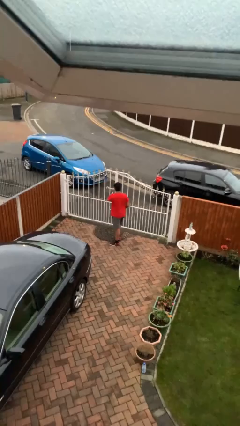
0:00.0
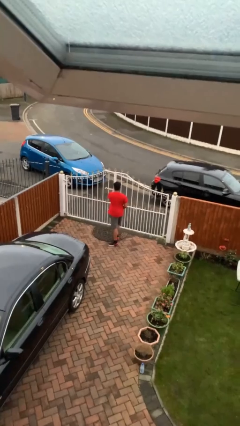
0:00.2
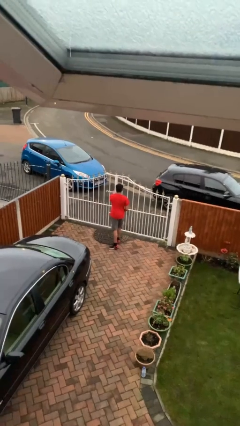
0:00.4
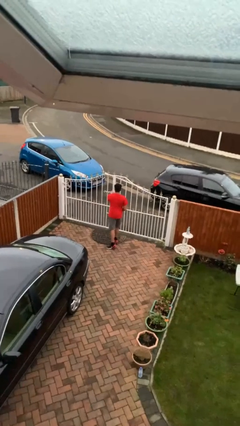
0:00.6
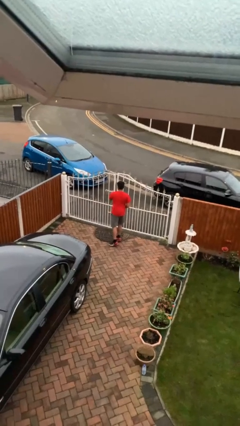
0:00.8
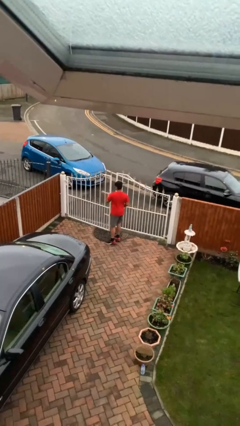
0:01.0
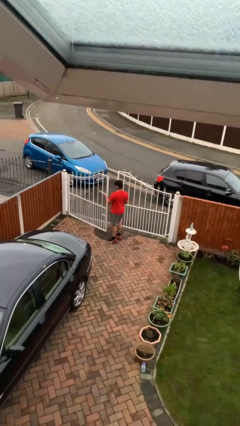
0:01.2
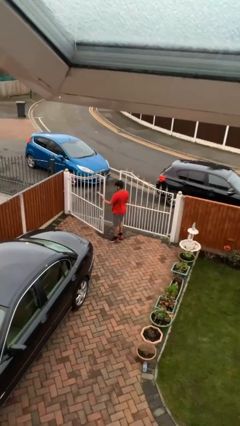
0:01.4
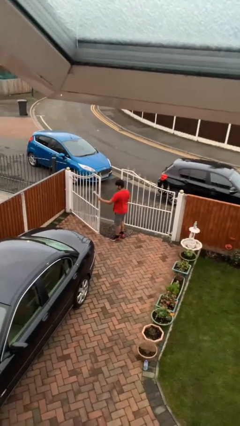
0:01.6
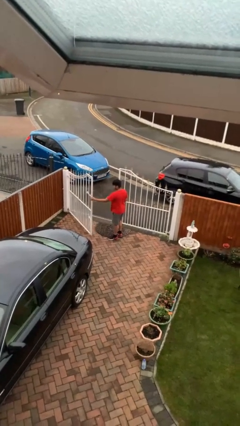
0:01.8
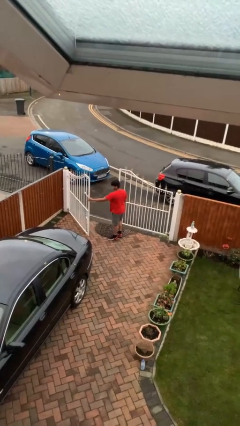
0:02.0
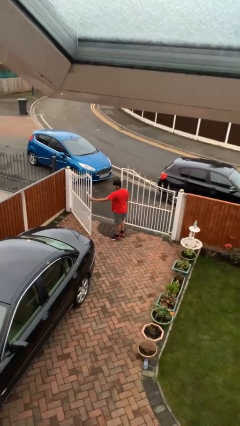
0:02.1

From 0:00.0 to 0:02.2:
person opens facility door

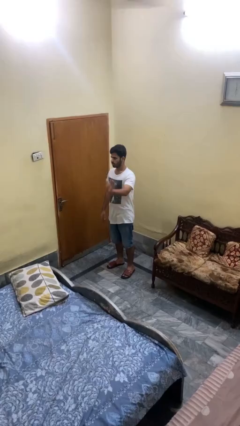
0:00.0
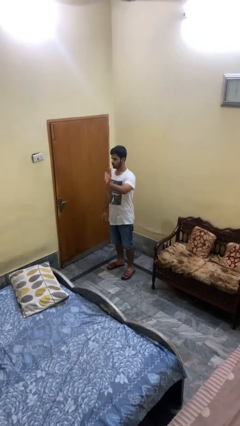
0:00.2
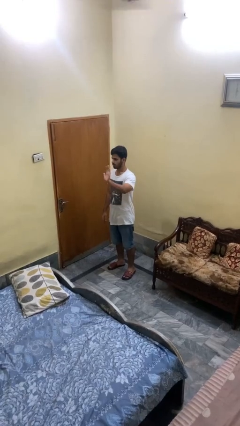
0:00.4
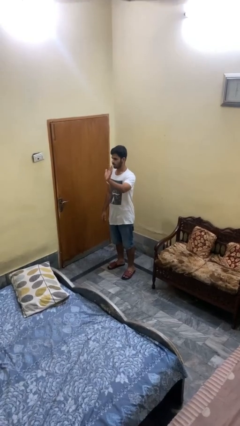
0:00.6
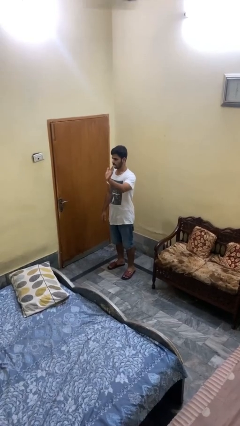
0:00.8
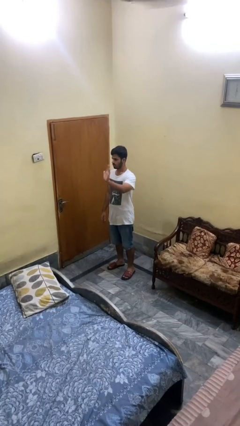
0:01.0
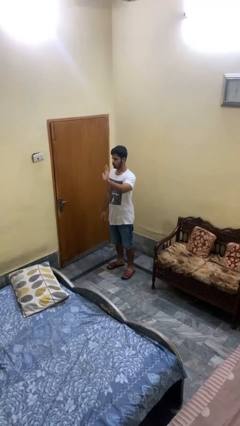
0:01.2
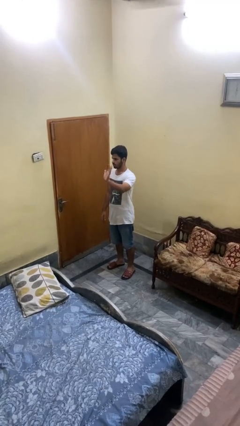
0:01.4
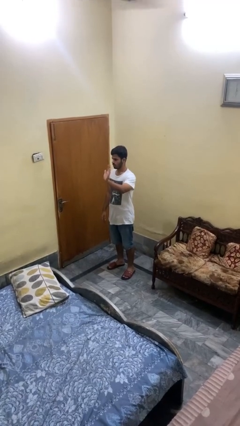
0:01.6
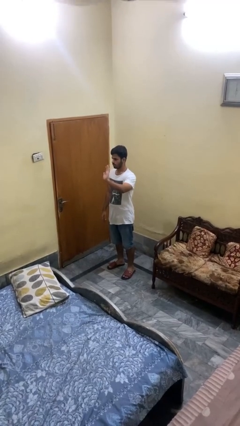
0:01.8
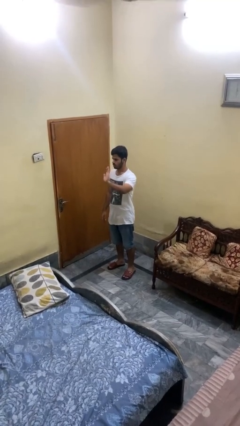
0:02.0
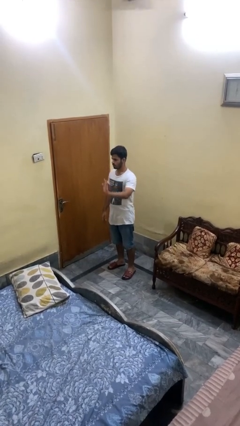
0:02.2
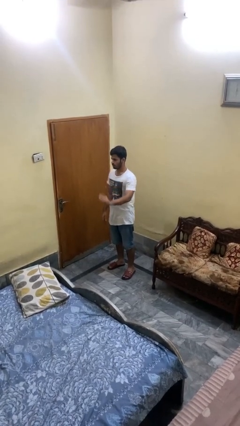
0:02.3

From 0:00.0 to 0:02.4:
person waves at person

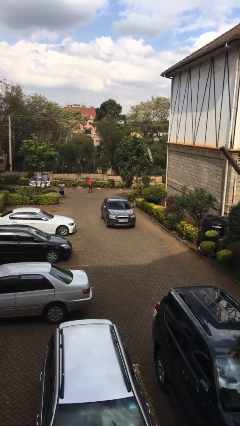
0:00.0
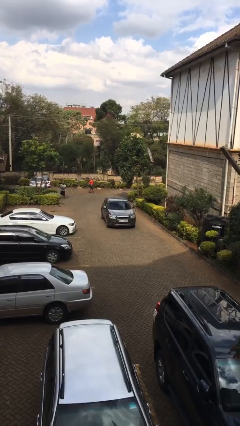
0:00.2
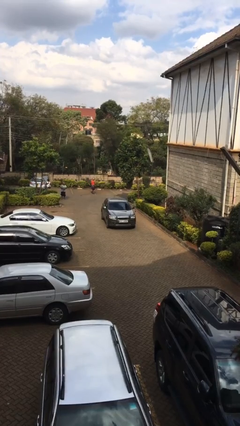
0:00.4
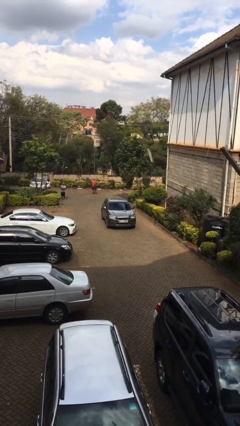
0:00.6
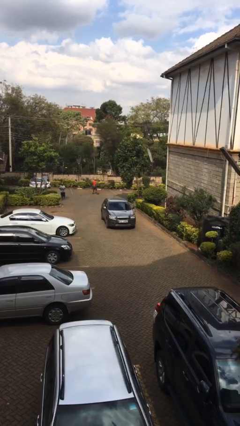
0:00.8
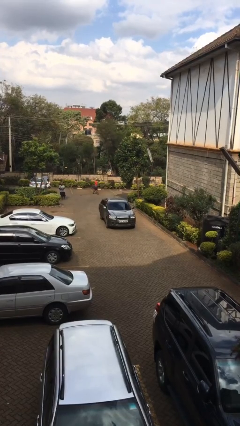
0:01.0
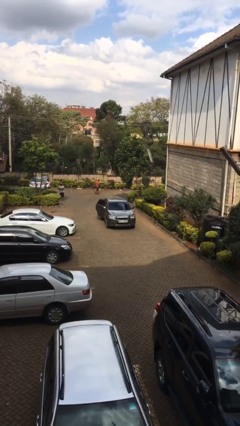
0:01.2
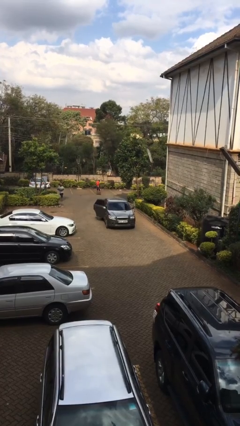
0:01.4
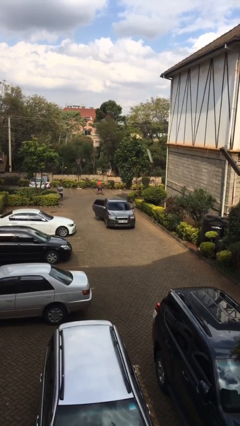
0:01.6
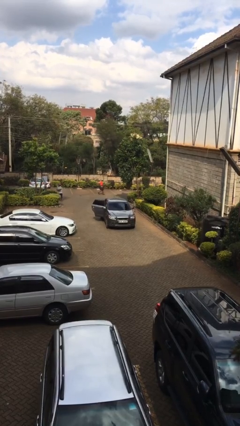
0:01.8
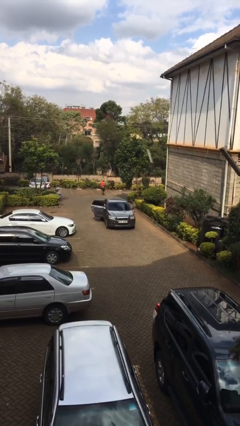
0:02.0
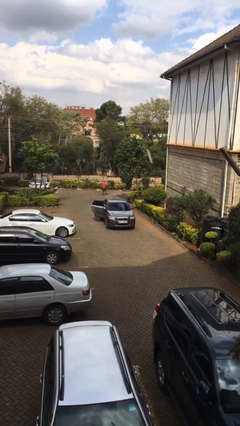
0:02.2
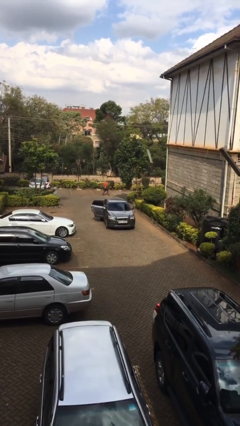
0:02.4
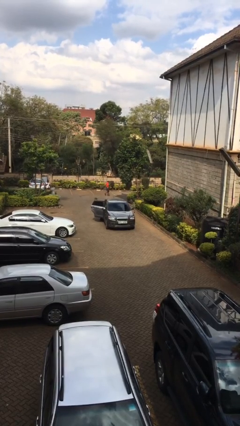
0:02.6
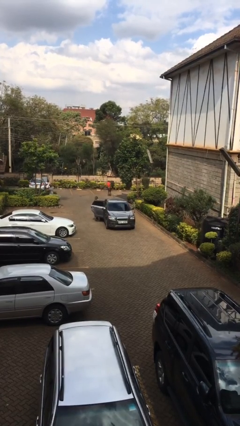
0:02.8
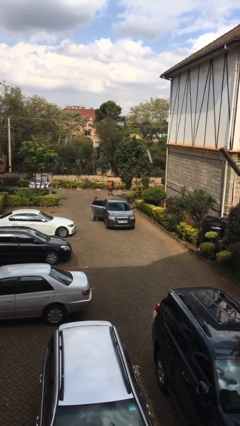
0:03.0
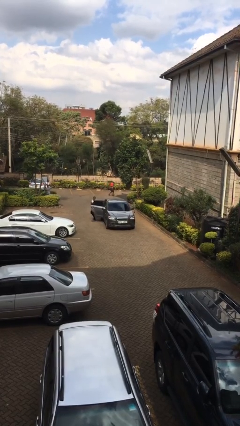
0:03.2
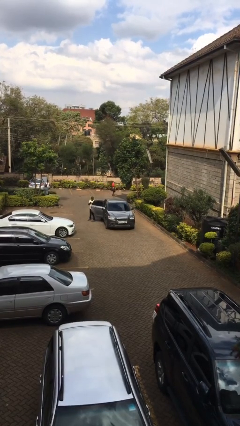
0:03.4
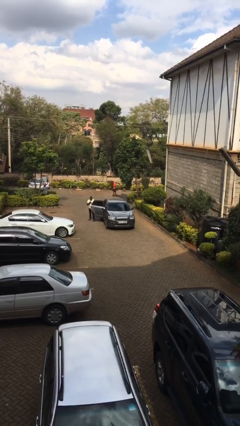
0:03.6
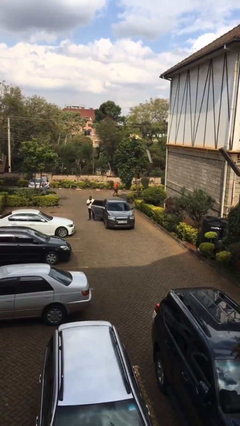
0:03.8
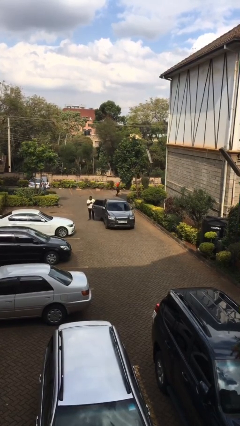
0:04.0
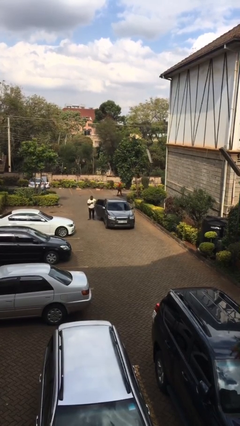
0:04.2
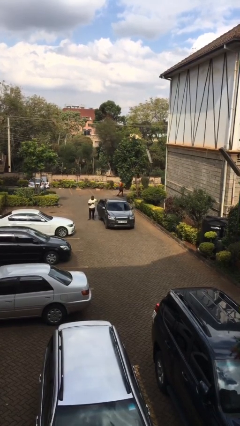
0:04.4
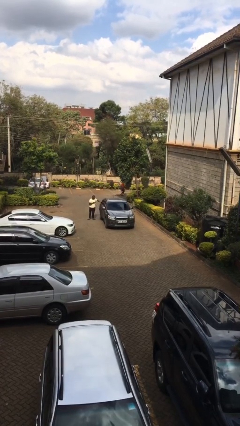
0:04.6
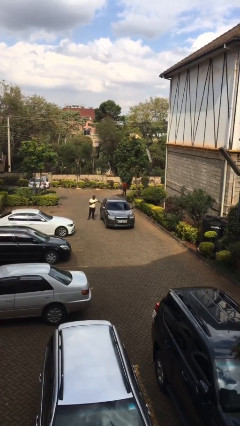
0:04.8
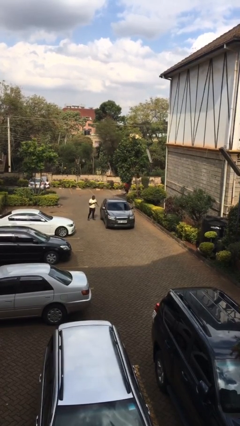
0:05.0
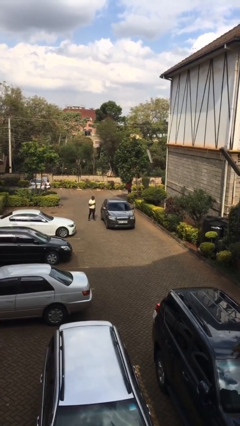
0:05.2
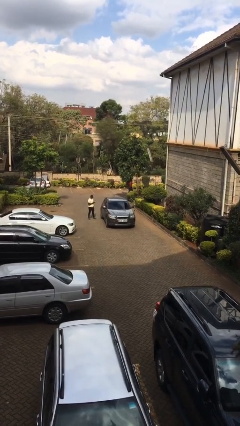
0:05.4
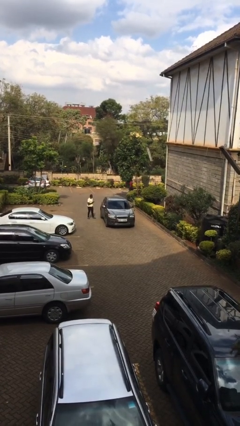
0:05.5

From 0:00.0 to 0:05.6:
car drops off person

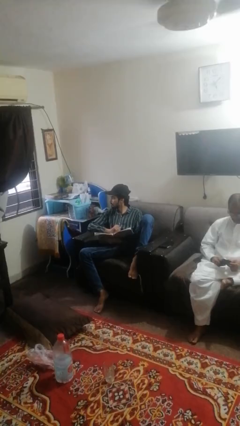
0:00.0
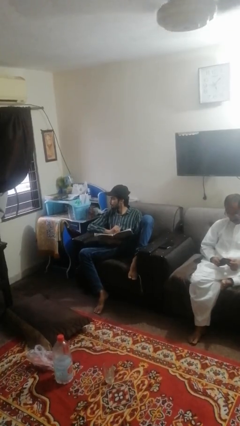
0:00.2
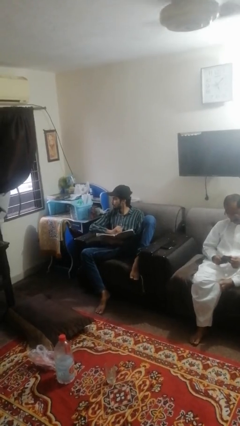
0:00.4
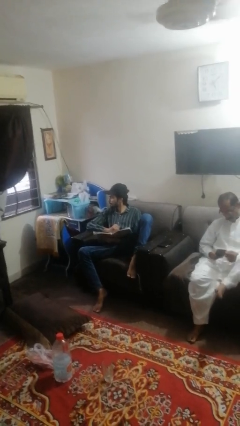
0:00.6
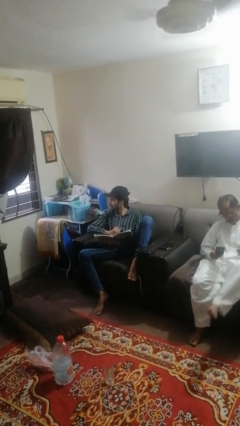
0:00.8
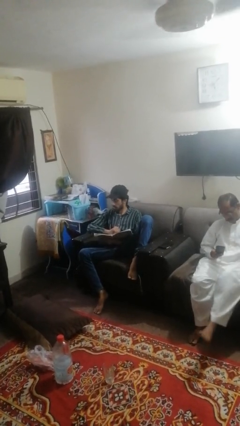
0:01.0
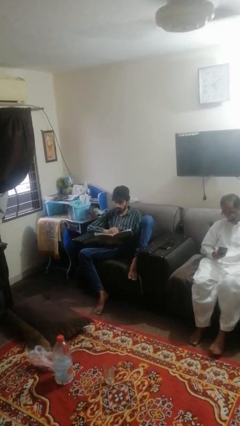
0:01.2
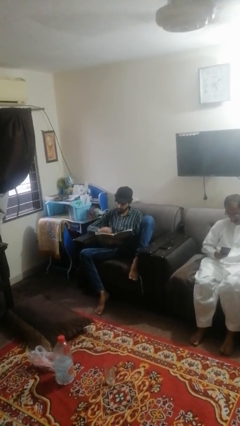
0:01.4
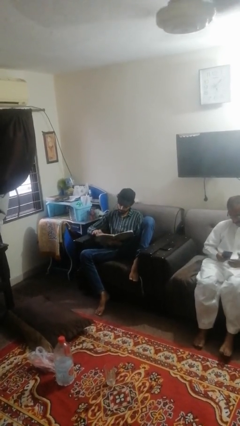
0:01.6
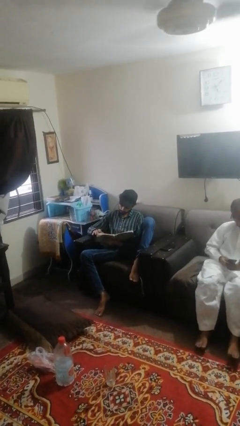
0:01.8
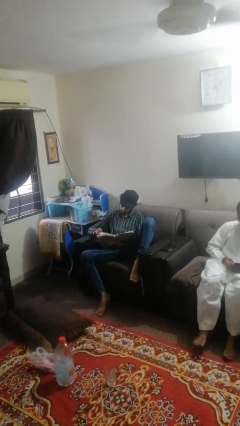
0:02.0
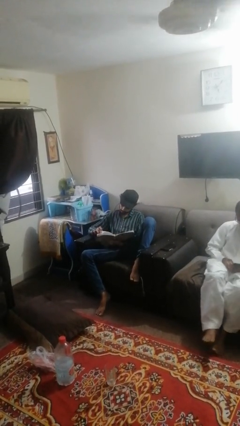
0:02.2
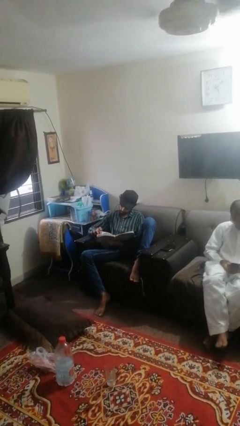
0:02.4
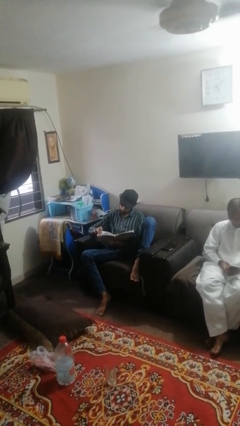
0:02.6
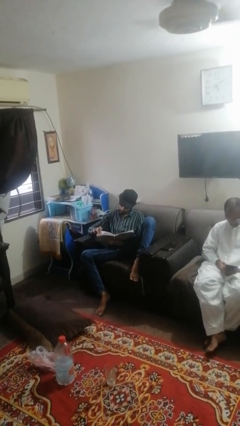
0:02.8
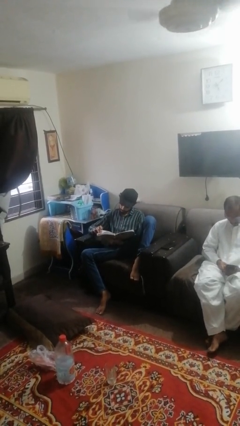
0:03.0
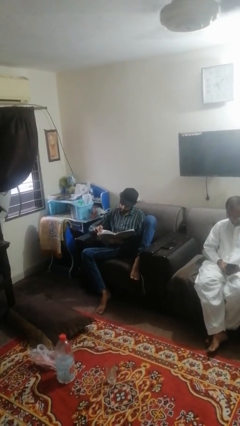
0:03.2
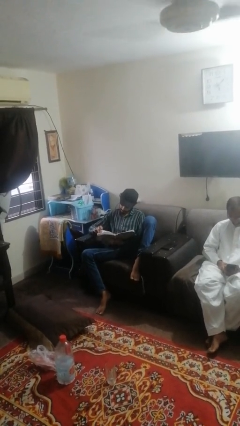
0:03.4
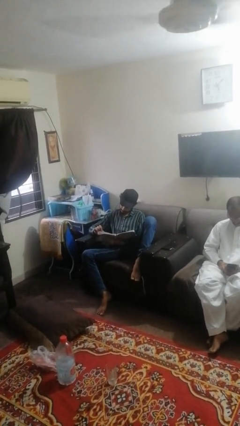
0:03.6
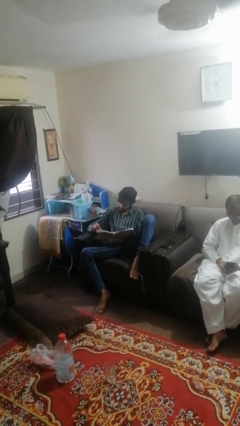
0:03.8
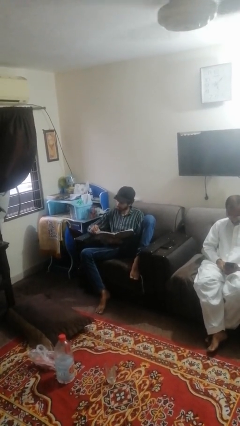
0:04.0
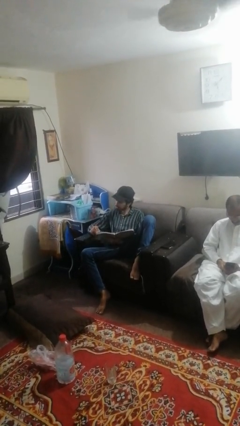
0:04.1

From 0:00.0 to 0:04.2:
person reads magazine

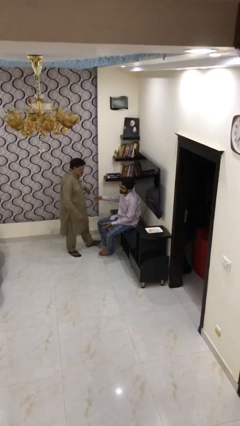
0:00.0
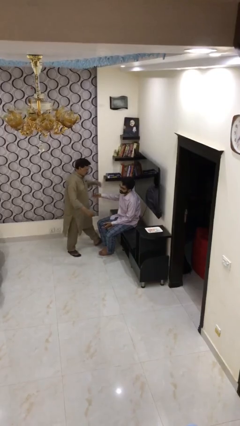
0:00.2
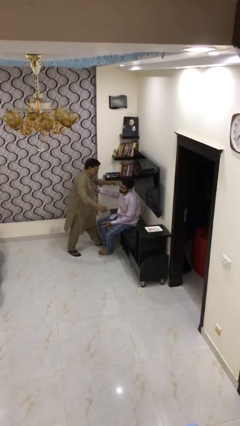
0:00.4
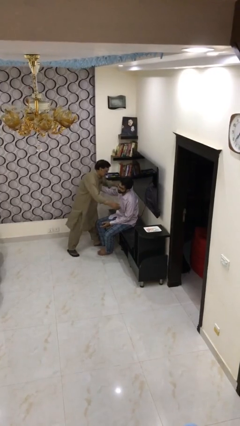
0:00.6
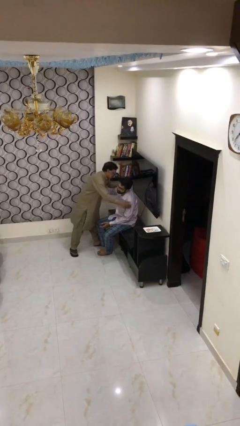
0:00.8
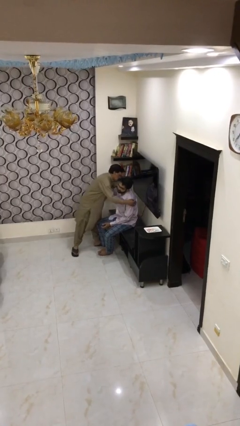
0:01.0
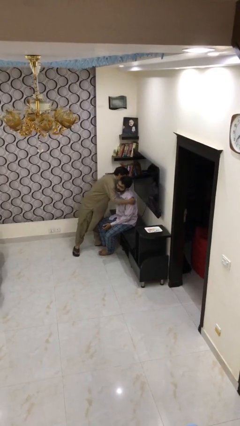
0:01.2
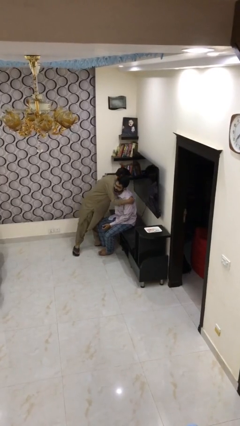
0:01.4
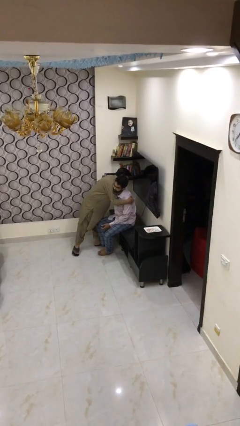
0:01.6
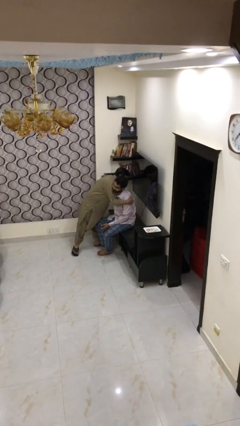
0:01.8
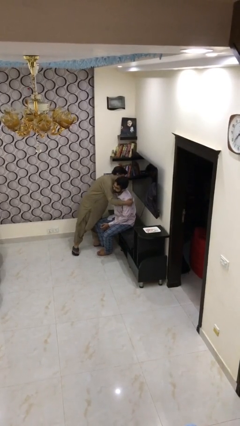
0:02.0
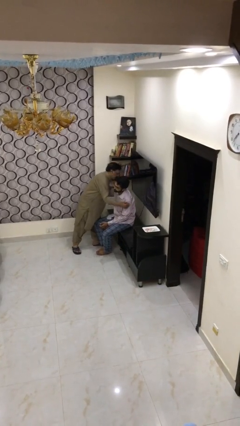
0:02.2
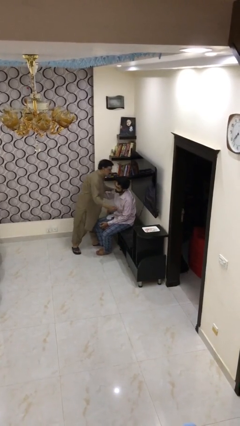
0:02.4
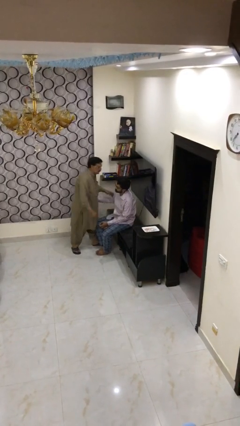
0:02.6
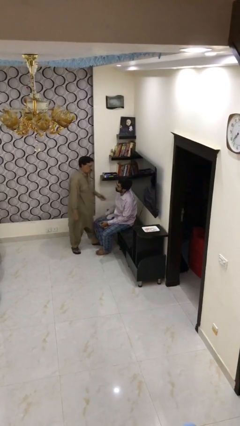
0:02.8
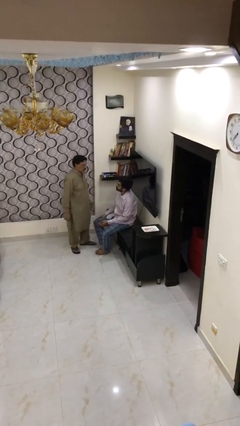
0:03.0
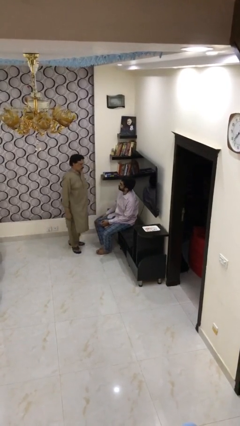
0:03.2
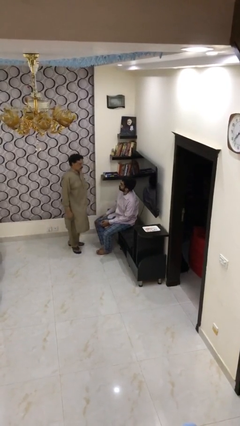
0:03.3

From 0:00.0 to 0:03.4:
person embraces person
